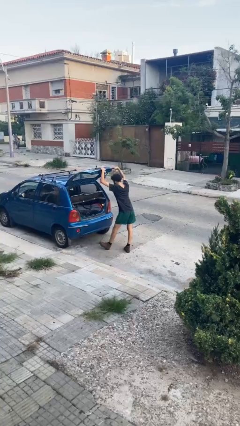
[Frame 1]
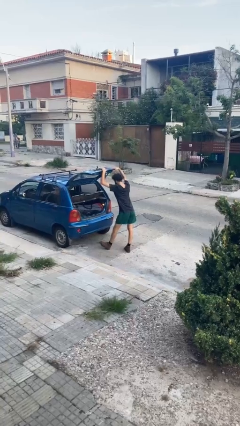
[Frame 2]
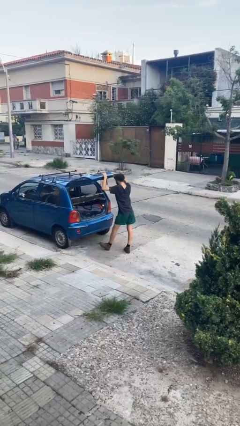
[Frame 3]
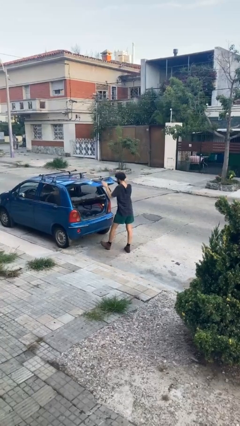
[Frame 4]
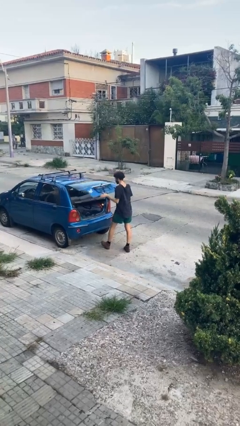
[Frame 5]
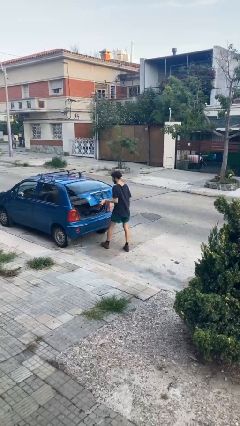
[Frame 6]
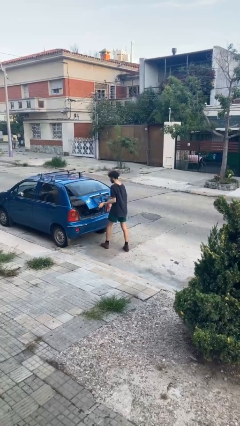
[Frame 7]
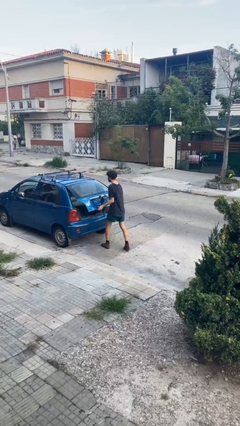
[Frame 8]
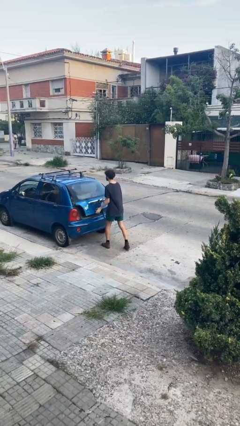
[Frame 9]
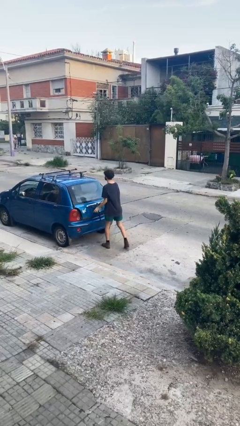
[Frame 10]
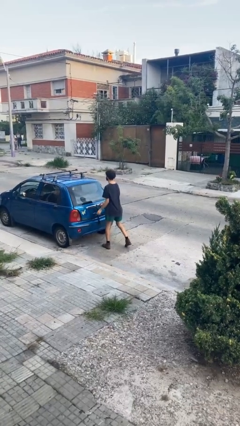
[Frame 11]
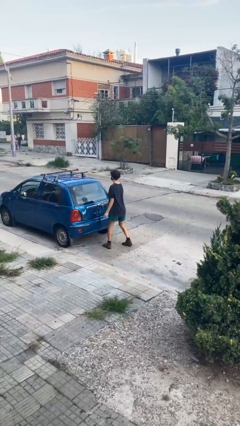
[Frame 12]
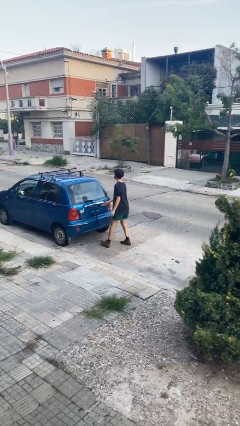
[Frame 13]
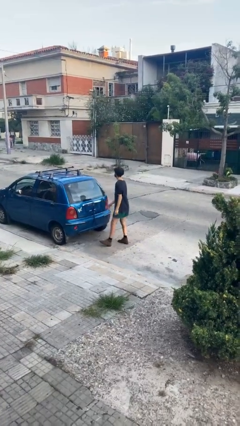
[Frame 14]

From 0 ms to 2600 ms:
person closes car trunk

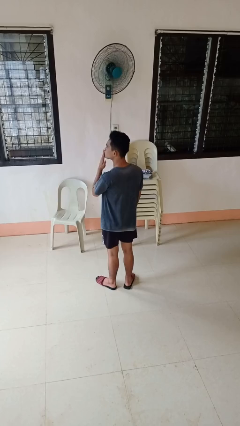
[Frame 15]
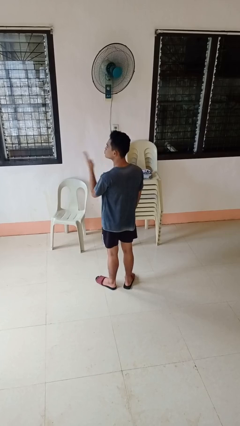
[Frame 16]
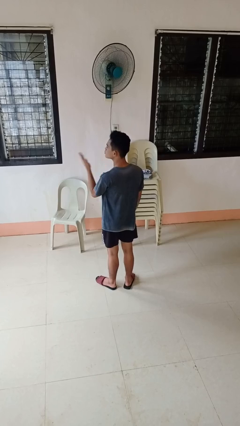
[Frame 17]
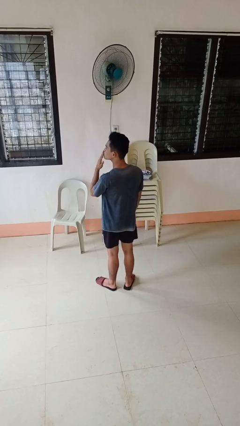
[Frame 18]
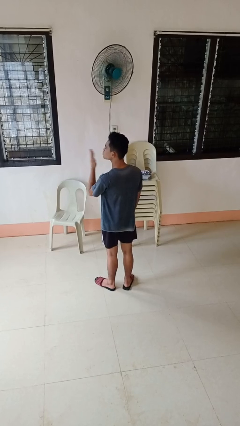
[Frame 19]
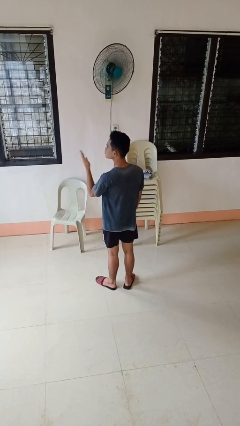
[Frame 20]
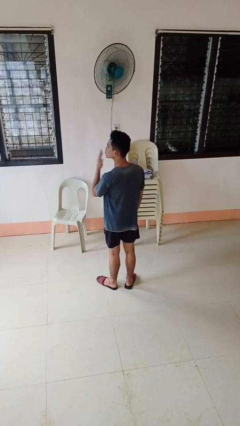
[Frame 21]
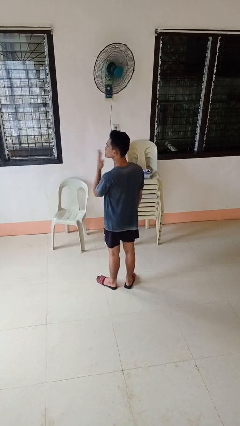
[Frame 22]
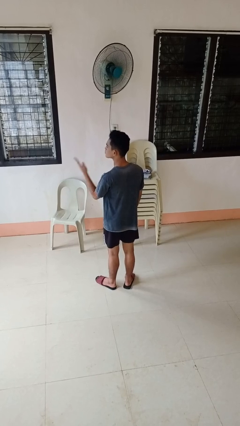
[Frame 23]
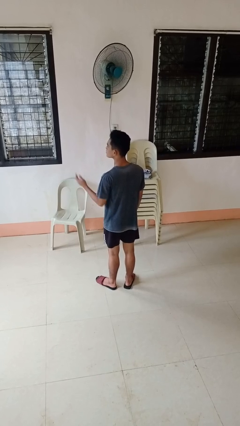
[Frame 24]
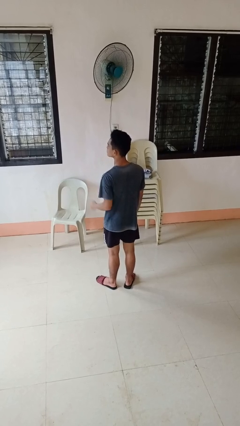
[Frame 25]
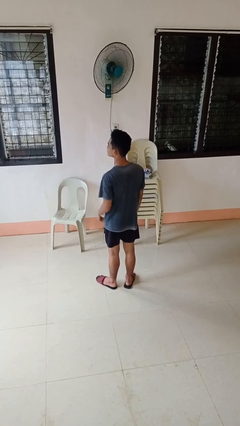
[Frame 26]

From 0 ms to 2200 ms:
person gestures blow kiss

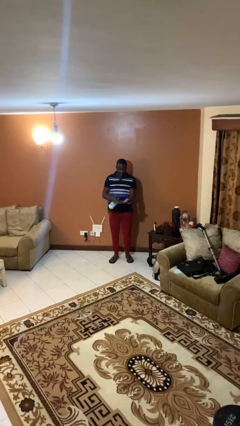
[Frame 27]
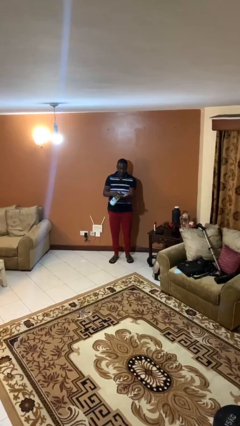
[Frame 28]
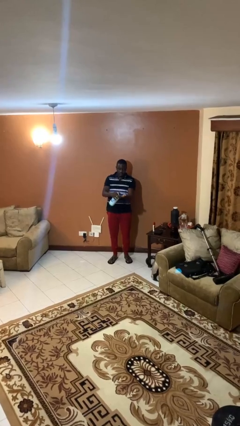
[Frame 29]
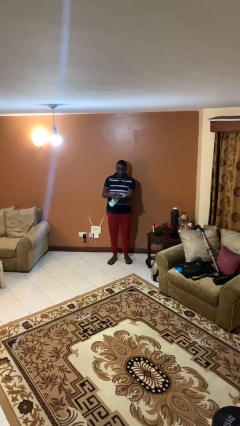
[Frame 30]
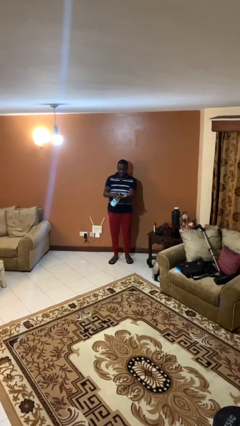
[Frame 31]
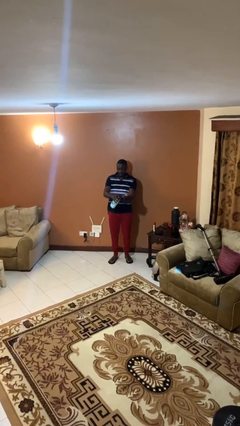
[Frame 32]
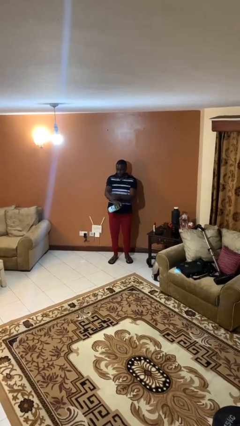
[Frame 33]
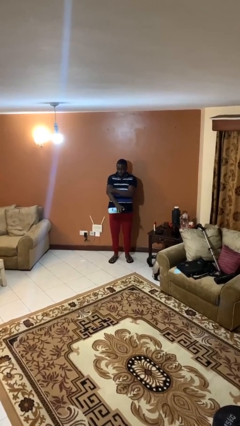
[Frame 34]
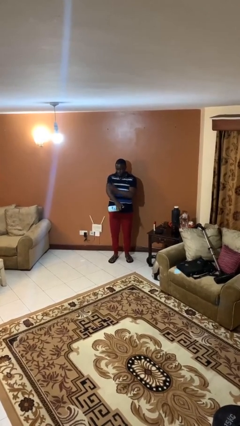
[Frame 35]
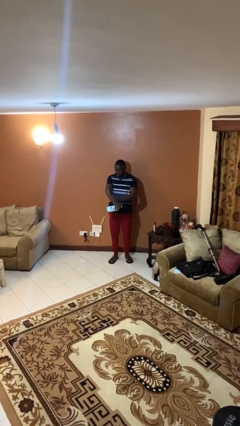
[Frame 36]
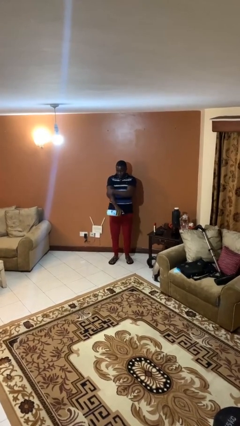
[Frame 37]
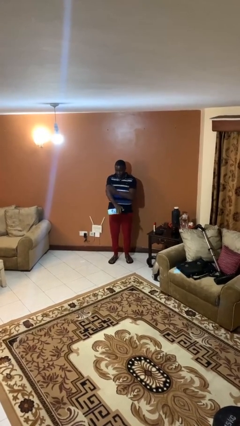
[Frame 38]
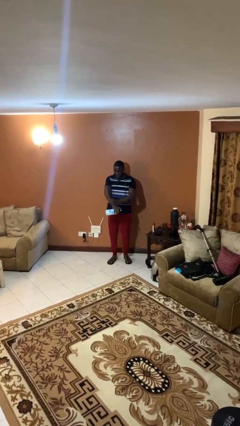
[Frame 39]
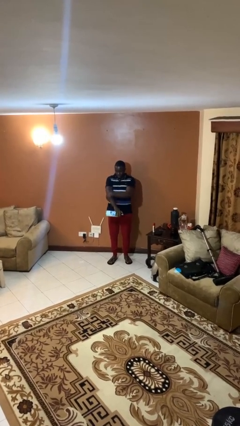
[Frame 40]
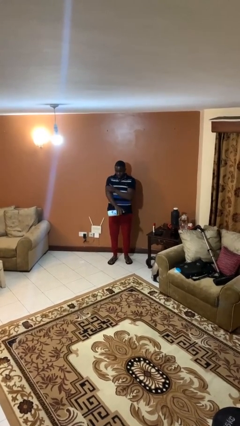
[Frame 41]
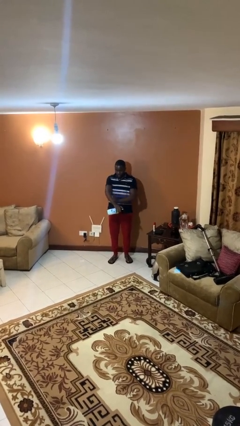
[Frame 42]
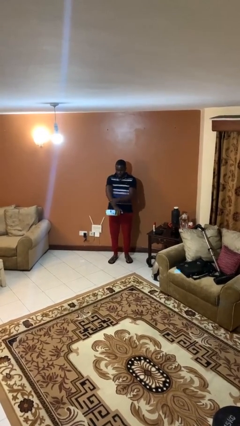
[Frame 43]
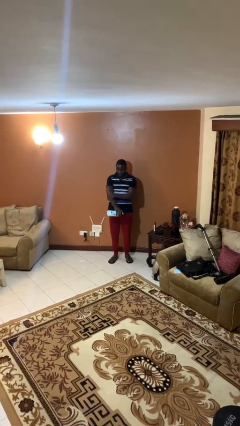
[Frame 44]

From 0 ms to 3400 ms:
person applies sunscreen

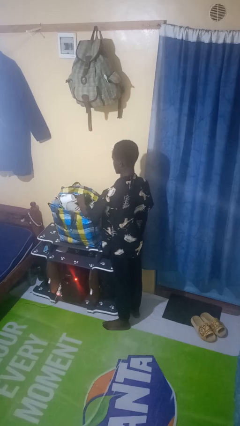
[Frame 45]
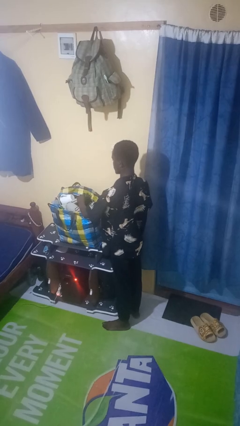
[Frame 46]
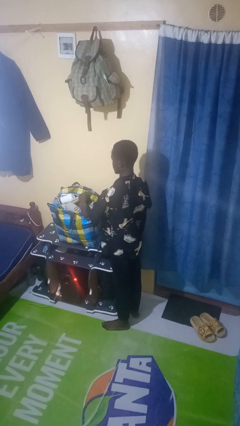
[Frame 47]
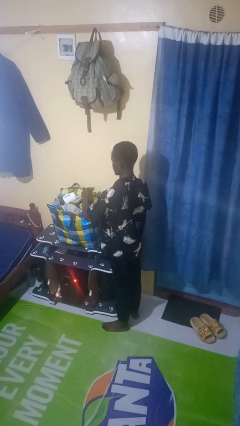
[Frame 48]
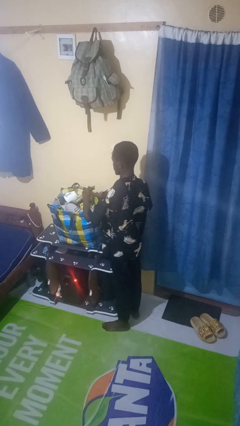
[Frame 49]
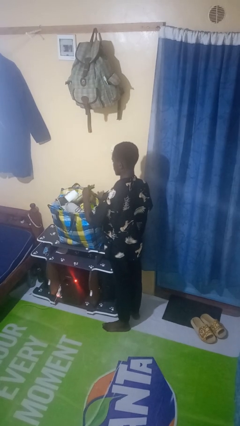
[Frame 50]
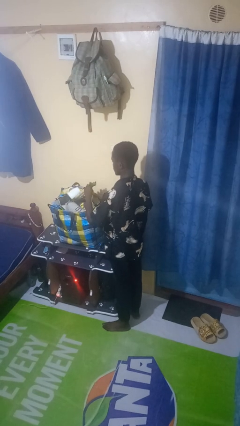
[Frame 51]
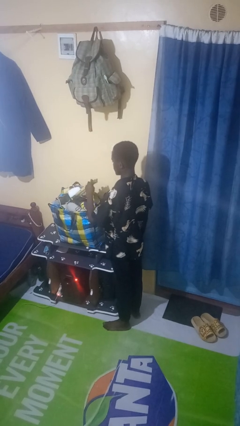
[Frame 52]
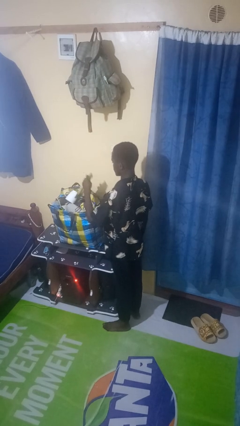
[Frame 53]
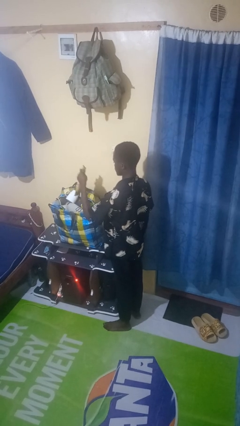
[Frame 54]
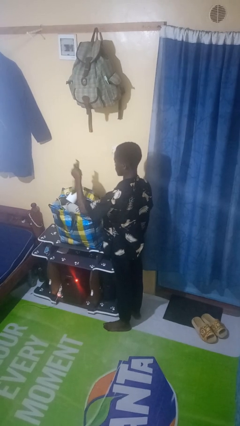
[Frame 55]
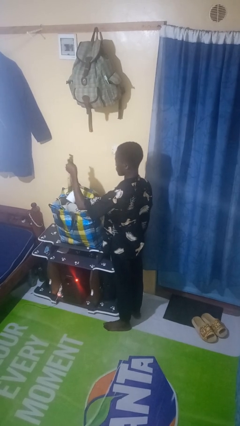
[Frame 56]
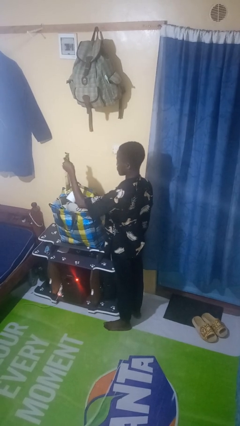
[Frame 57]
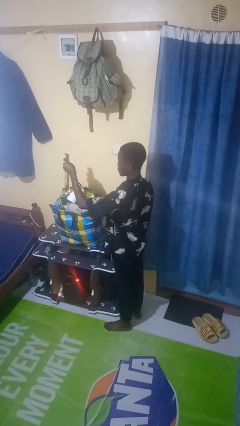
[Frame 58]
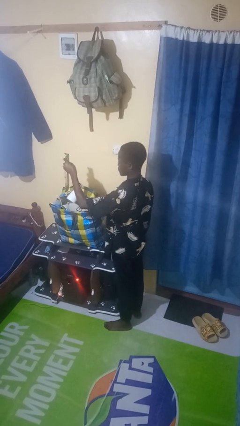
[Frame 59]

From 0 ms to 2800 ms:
person takes object from bag

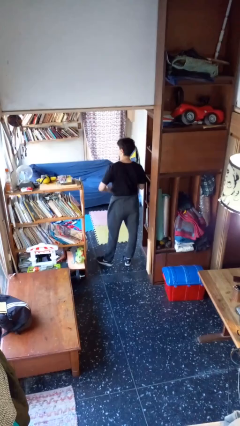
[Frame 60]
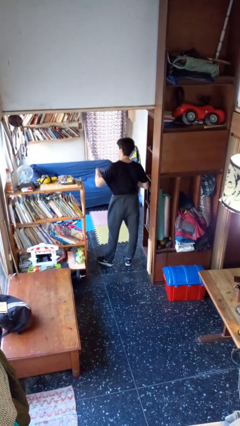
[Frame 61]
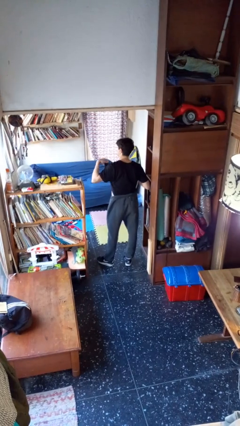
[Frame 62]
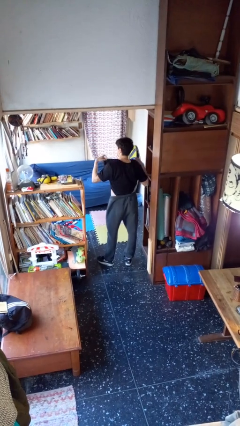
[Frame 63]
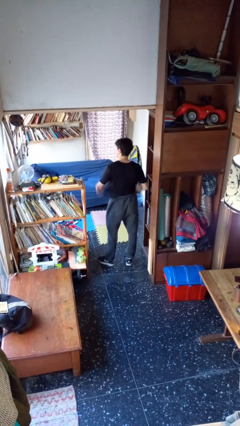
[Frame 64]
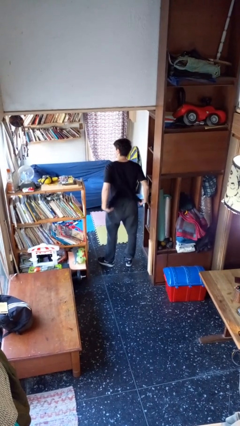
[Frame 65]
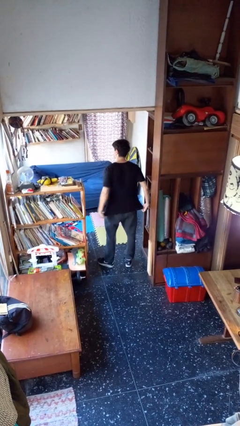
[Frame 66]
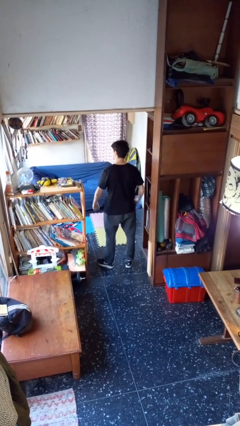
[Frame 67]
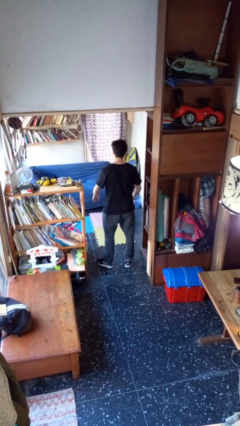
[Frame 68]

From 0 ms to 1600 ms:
person untucks shirt

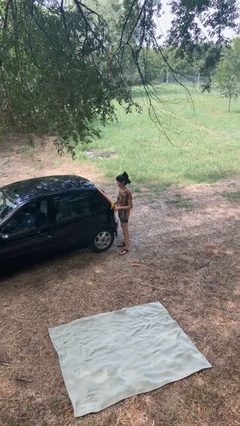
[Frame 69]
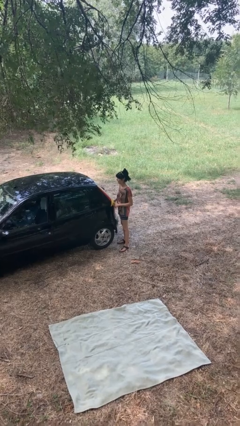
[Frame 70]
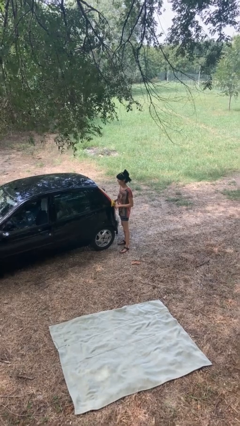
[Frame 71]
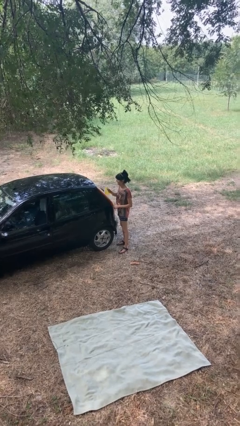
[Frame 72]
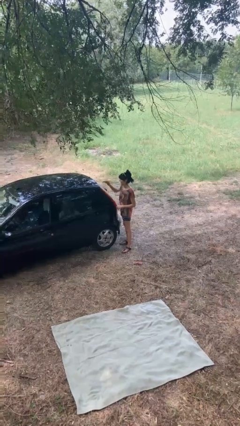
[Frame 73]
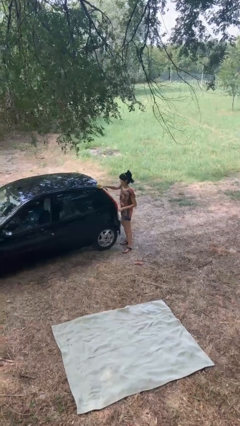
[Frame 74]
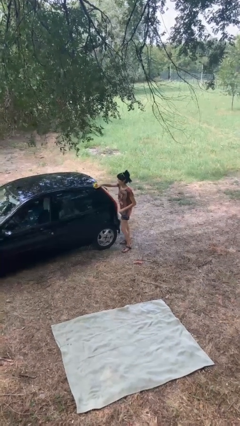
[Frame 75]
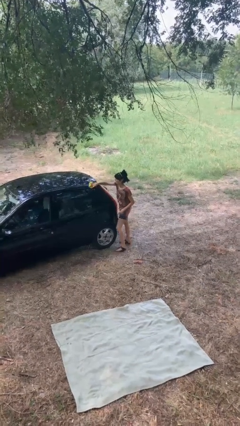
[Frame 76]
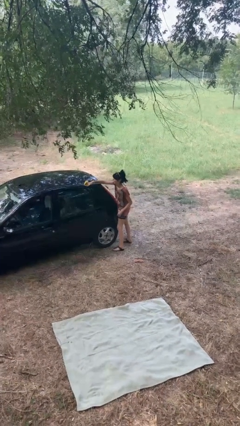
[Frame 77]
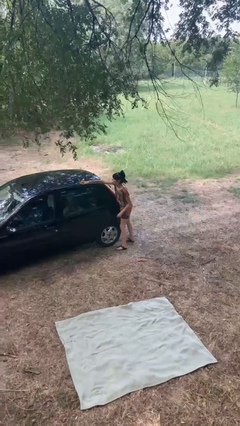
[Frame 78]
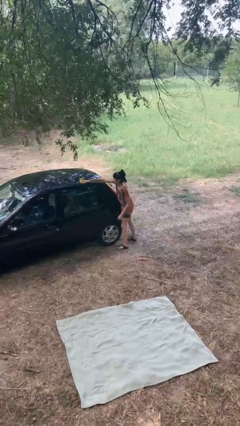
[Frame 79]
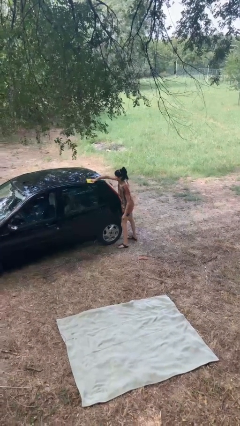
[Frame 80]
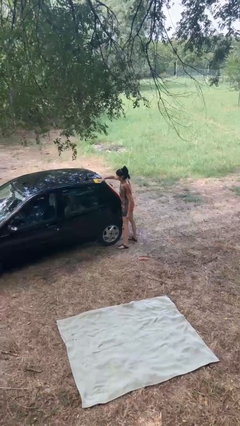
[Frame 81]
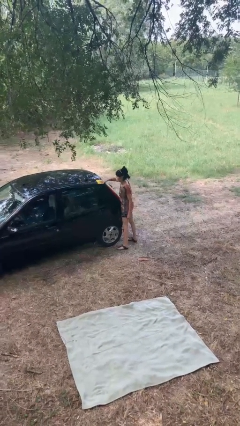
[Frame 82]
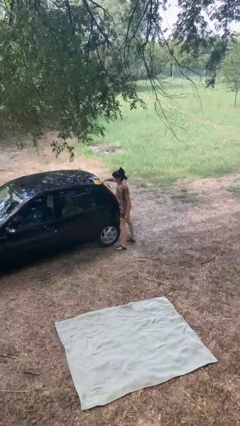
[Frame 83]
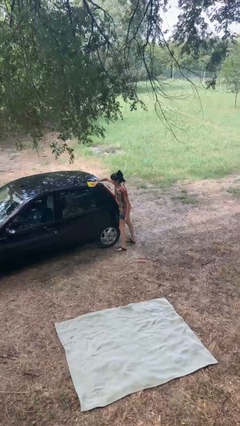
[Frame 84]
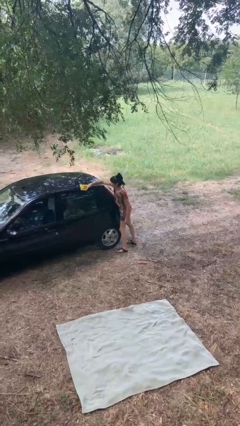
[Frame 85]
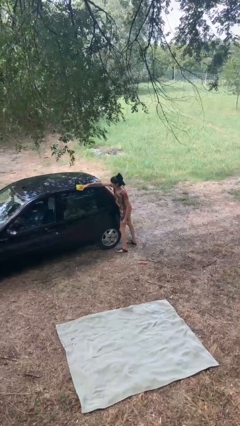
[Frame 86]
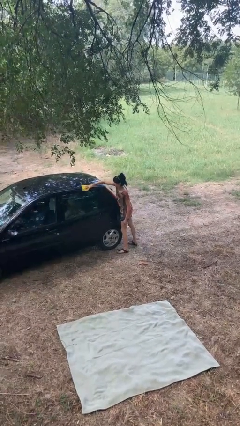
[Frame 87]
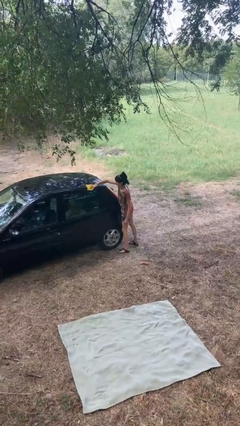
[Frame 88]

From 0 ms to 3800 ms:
person polishes car with rag

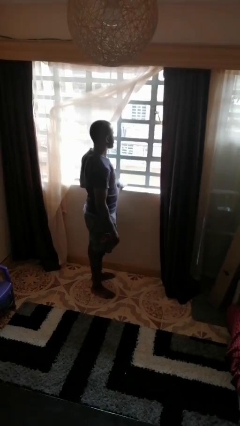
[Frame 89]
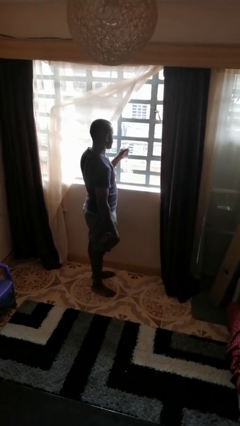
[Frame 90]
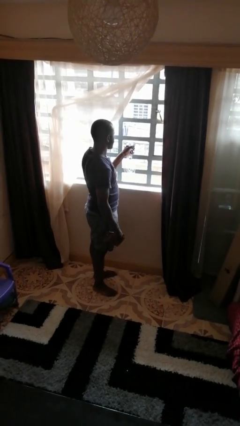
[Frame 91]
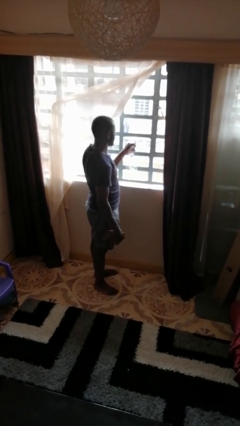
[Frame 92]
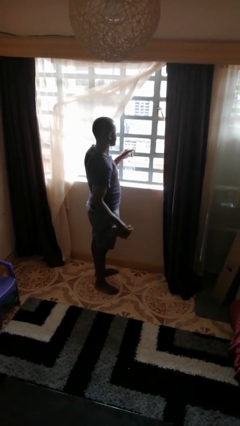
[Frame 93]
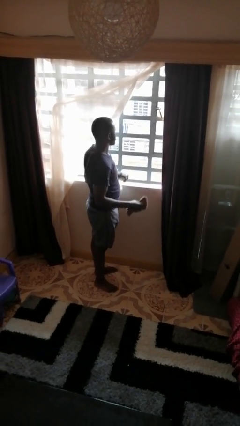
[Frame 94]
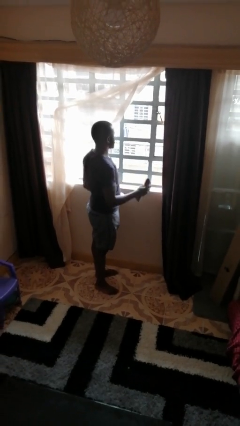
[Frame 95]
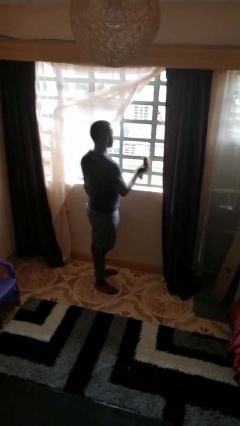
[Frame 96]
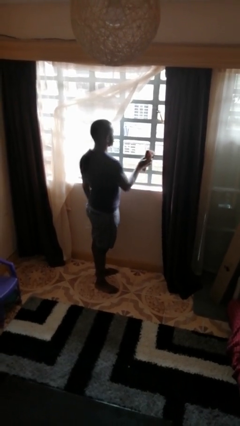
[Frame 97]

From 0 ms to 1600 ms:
person sprays from bottle
